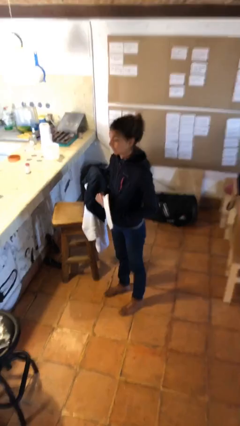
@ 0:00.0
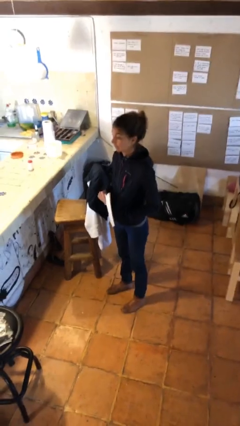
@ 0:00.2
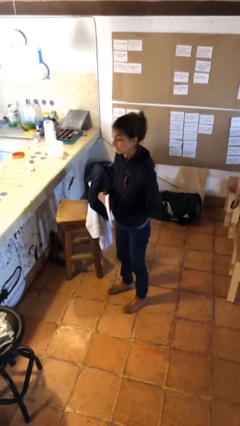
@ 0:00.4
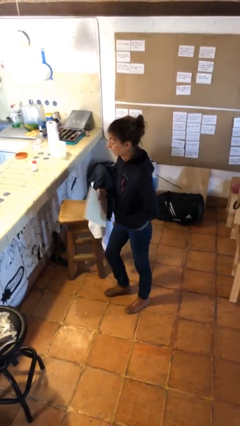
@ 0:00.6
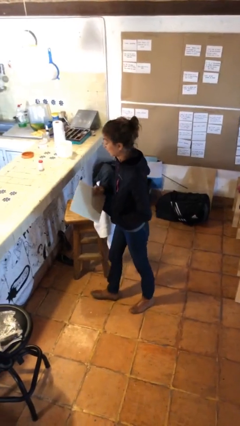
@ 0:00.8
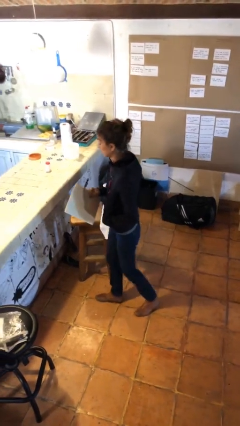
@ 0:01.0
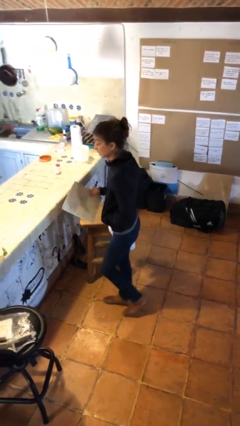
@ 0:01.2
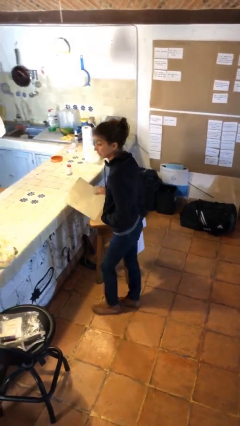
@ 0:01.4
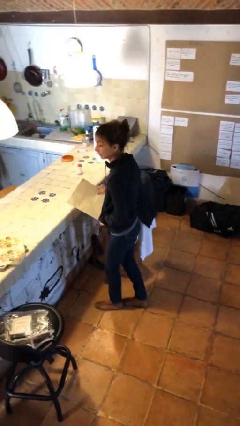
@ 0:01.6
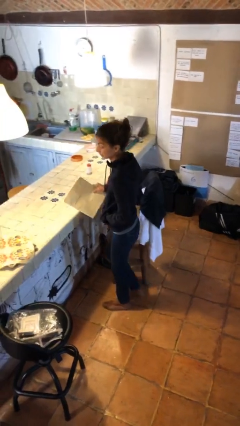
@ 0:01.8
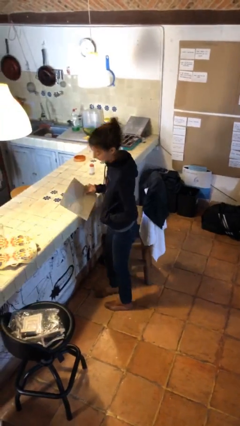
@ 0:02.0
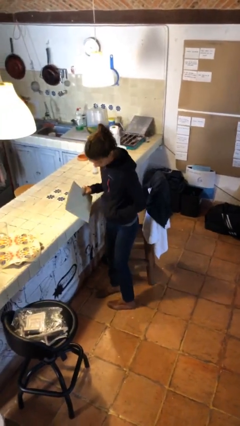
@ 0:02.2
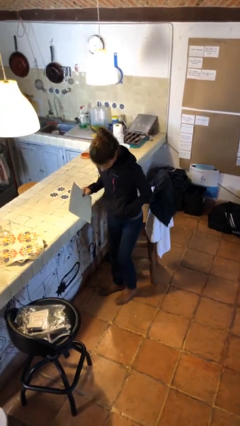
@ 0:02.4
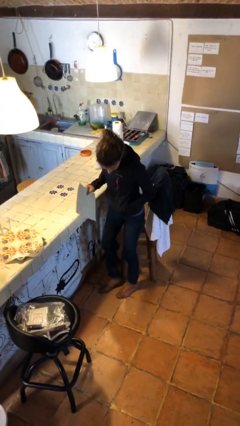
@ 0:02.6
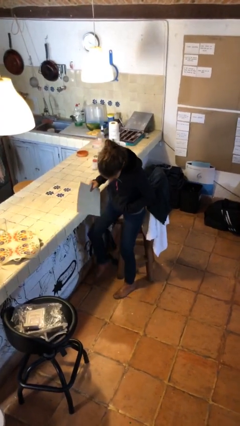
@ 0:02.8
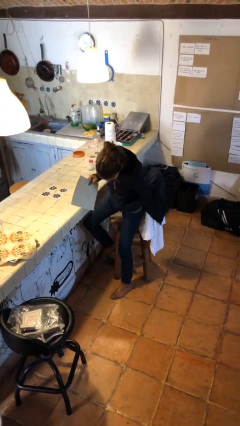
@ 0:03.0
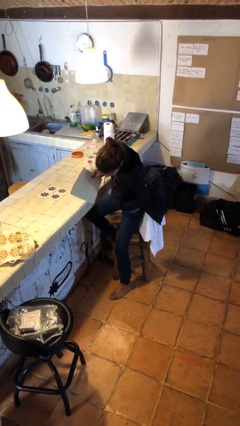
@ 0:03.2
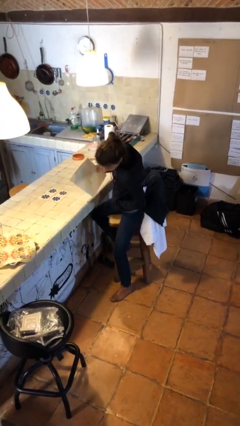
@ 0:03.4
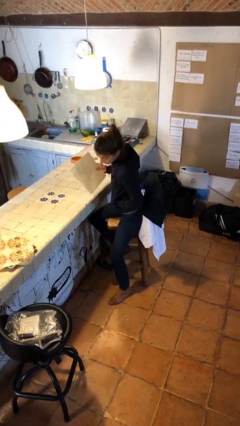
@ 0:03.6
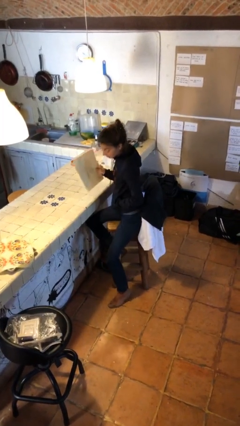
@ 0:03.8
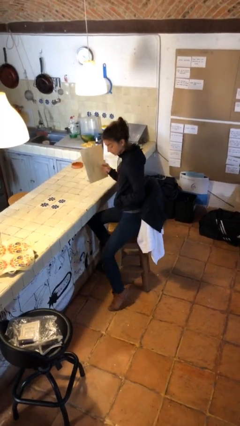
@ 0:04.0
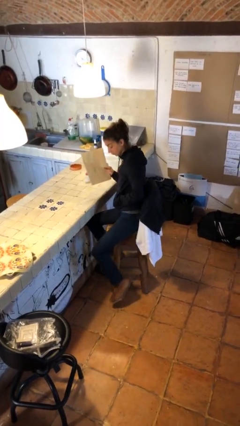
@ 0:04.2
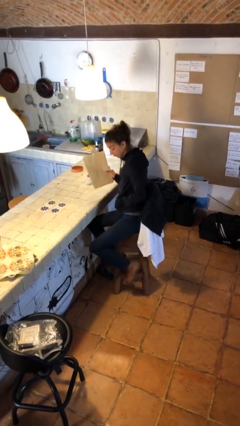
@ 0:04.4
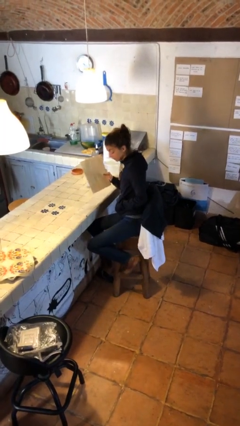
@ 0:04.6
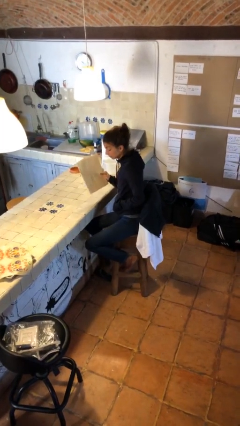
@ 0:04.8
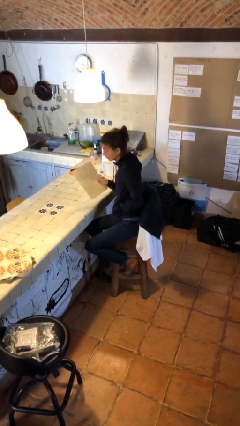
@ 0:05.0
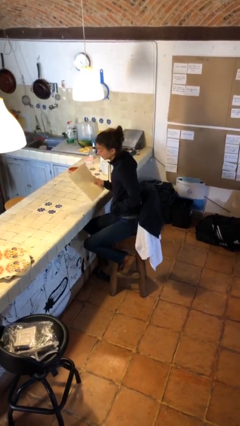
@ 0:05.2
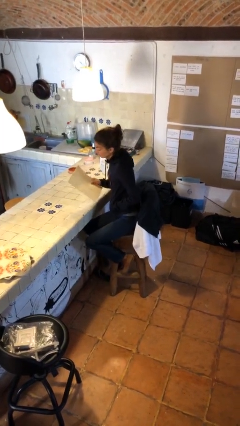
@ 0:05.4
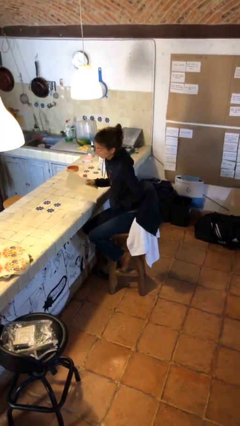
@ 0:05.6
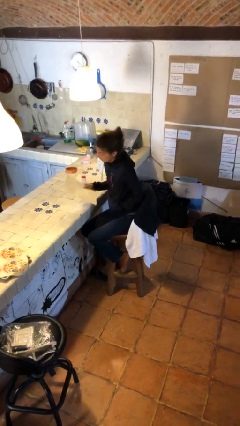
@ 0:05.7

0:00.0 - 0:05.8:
person sits down

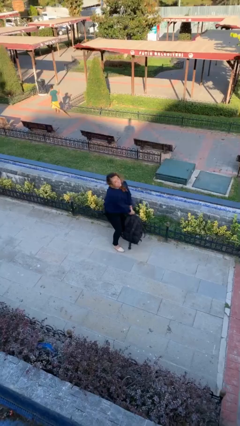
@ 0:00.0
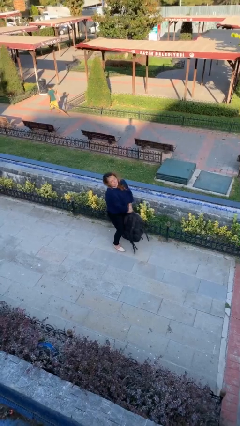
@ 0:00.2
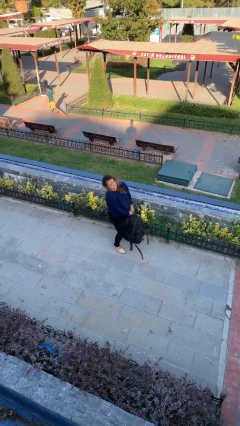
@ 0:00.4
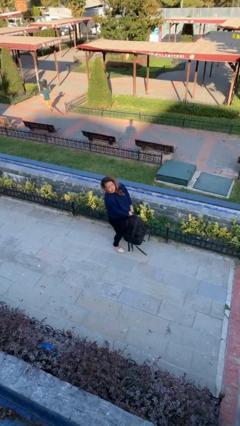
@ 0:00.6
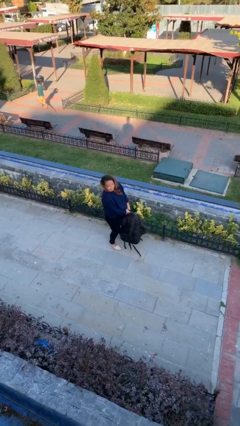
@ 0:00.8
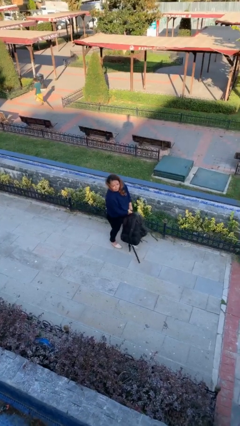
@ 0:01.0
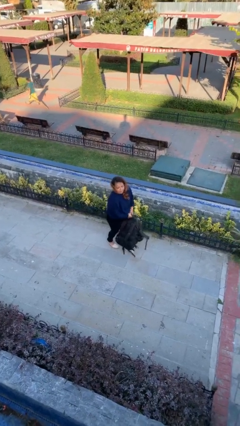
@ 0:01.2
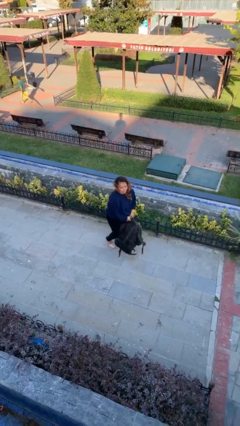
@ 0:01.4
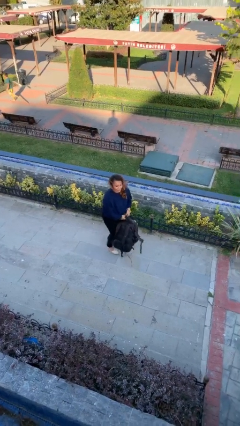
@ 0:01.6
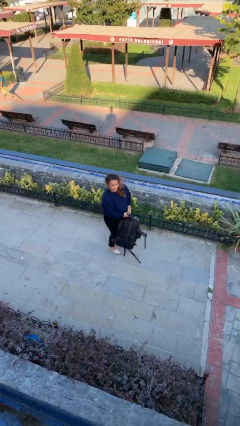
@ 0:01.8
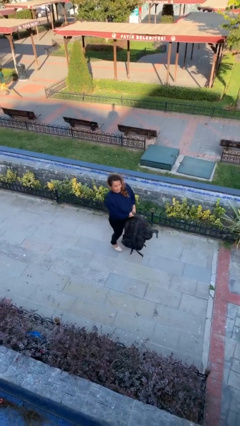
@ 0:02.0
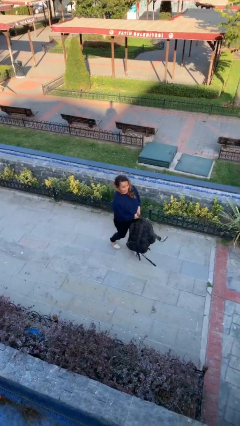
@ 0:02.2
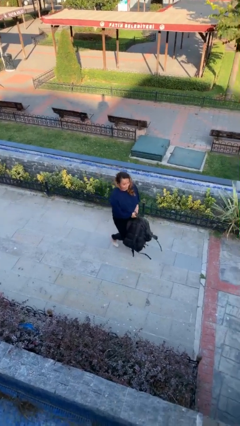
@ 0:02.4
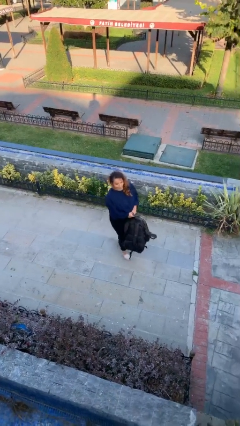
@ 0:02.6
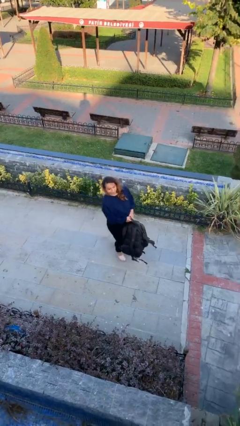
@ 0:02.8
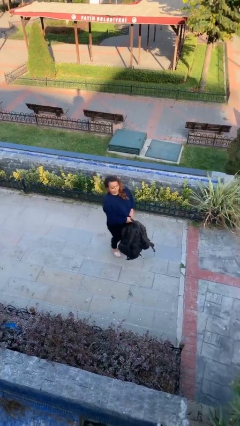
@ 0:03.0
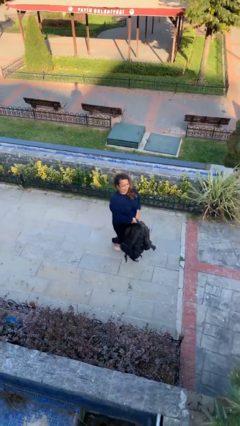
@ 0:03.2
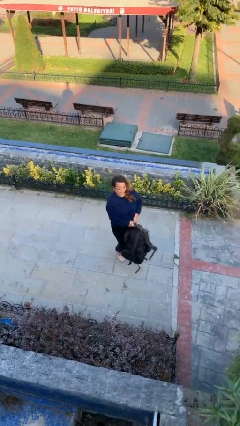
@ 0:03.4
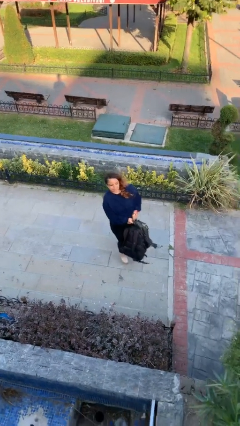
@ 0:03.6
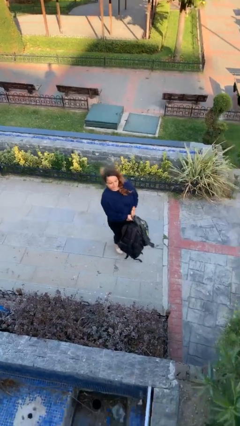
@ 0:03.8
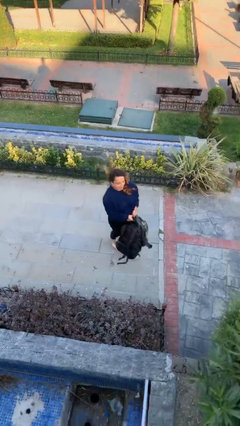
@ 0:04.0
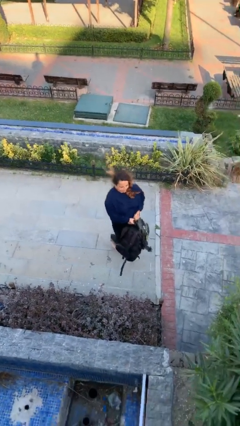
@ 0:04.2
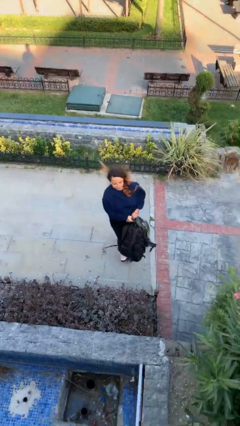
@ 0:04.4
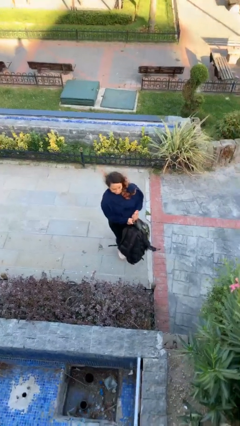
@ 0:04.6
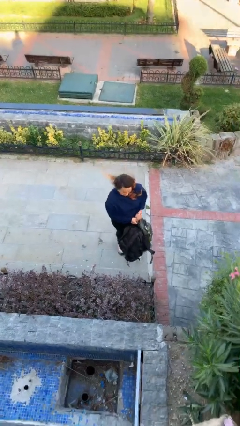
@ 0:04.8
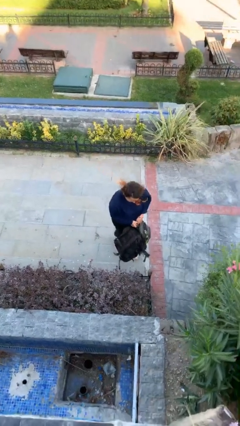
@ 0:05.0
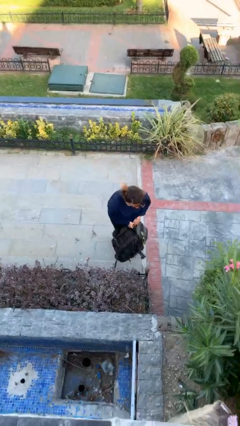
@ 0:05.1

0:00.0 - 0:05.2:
person carries heavy object

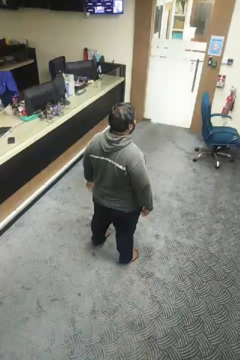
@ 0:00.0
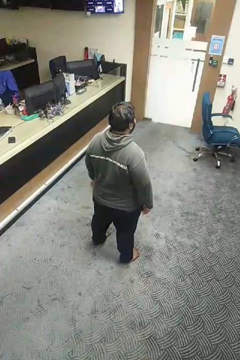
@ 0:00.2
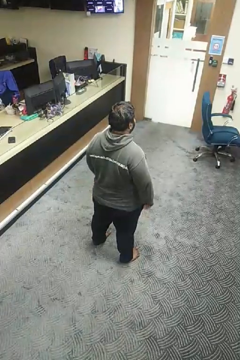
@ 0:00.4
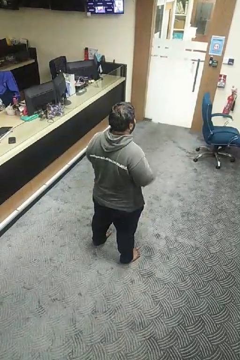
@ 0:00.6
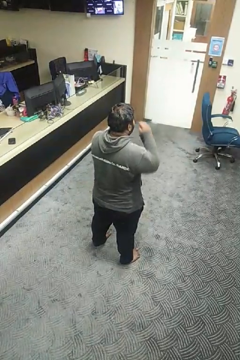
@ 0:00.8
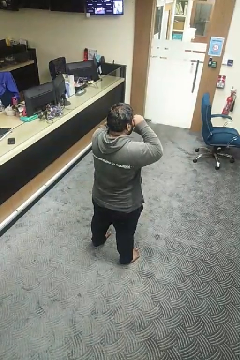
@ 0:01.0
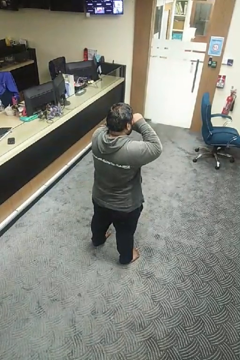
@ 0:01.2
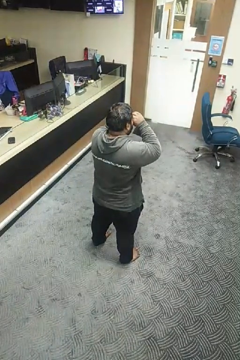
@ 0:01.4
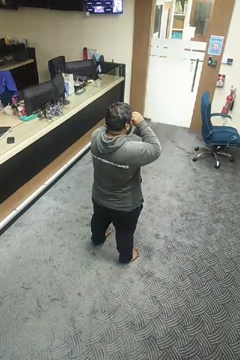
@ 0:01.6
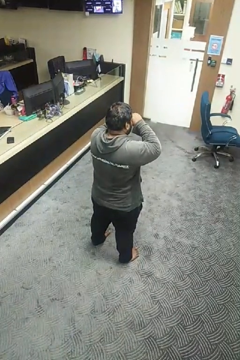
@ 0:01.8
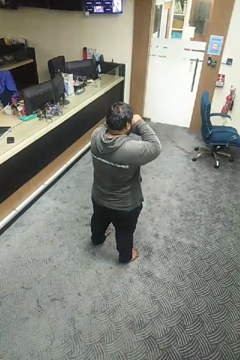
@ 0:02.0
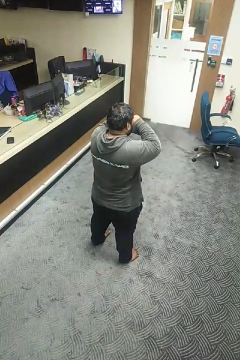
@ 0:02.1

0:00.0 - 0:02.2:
person rubs eyes

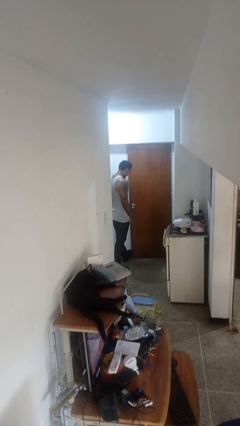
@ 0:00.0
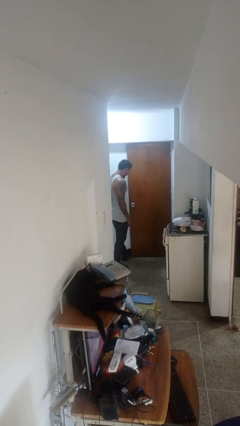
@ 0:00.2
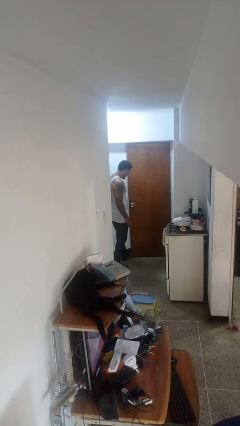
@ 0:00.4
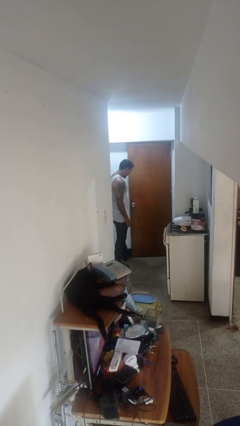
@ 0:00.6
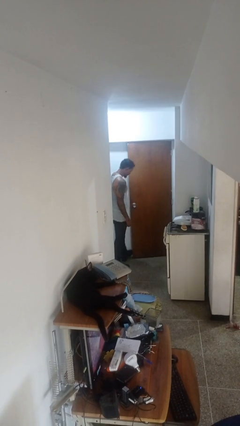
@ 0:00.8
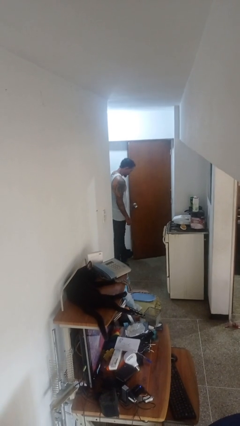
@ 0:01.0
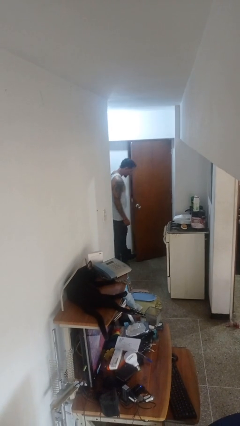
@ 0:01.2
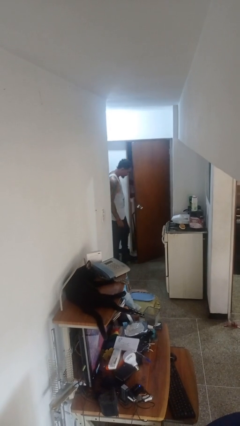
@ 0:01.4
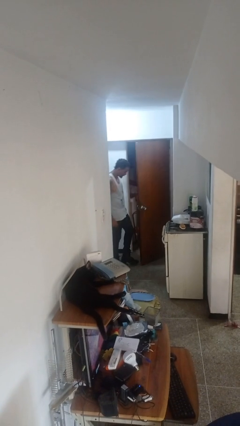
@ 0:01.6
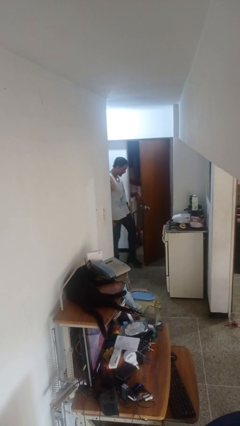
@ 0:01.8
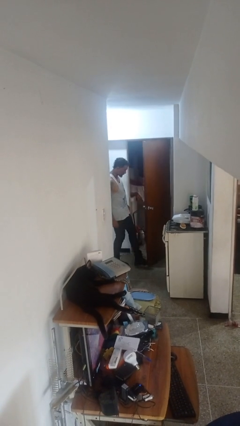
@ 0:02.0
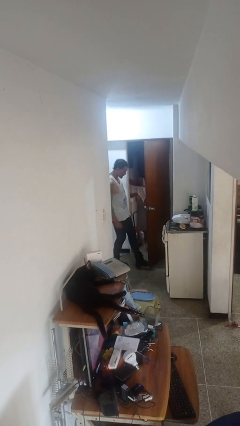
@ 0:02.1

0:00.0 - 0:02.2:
person opens facility door

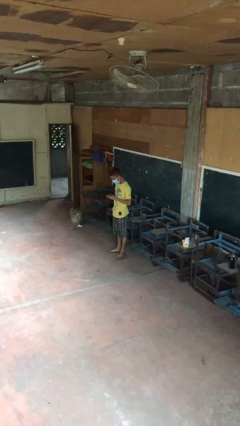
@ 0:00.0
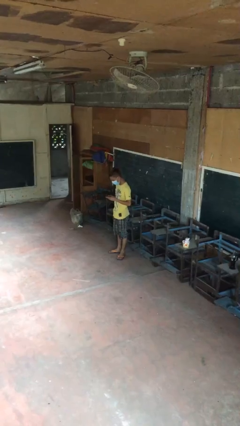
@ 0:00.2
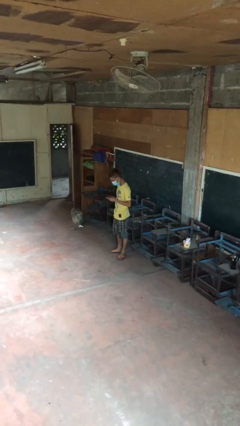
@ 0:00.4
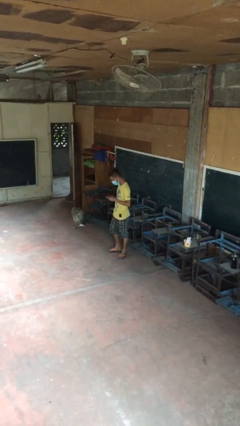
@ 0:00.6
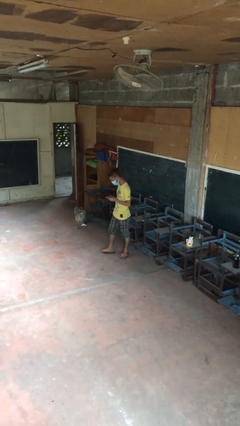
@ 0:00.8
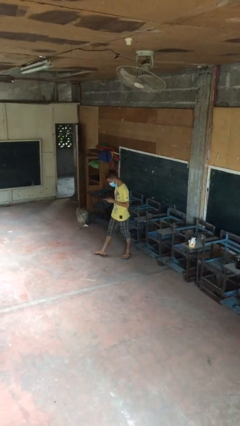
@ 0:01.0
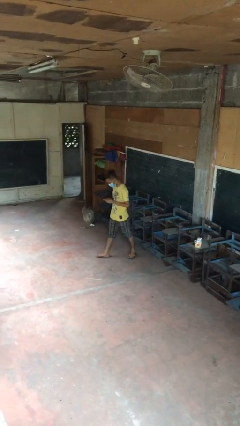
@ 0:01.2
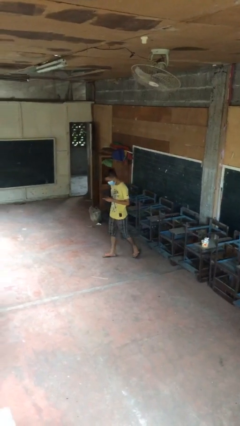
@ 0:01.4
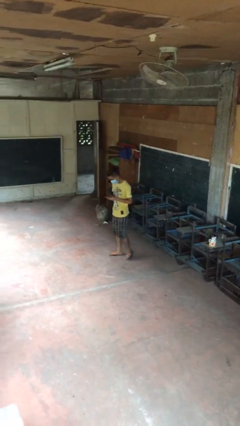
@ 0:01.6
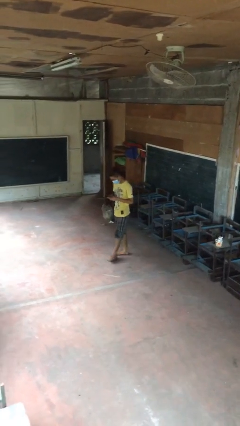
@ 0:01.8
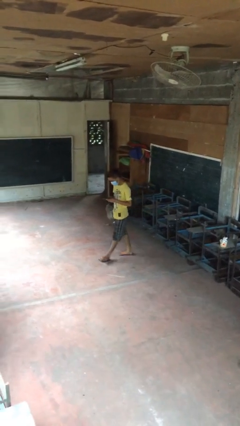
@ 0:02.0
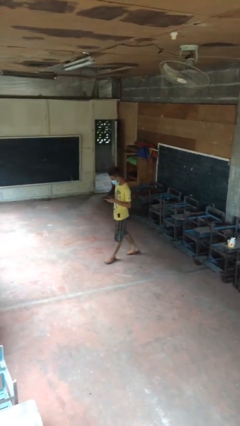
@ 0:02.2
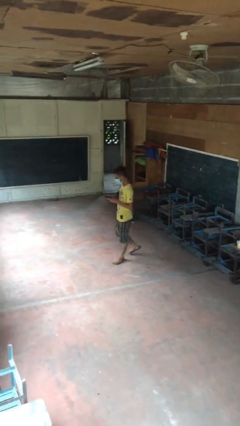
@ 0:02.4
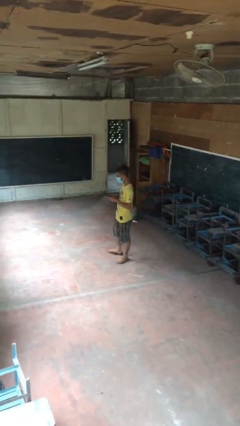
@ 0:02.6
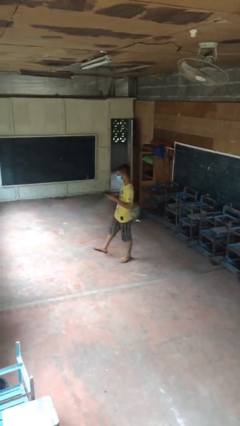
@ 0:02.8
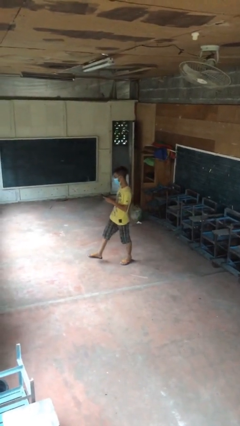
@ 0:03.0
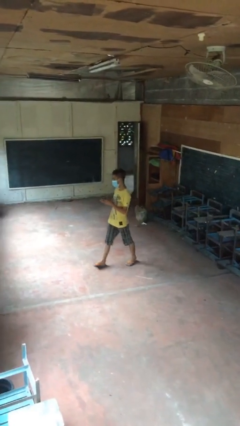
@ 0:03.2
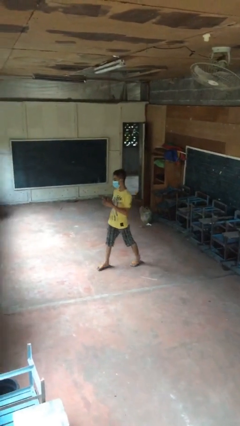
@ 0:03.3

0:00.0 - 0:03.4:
person texts on phone
